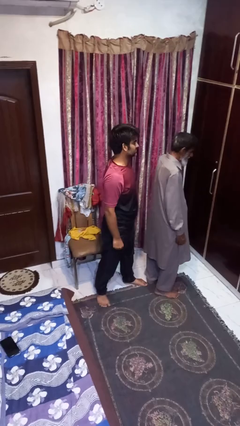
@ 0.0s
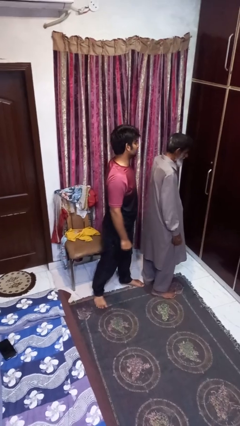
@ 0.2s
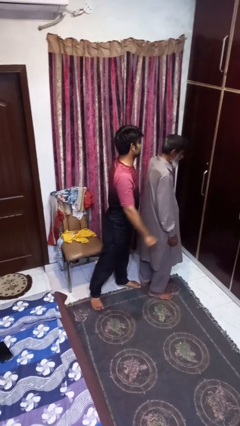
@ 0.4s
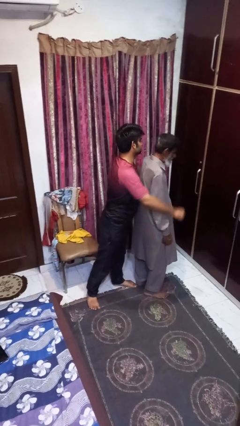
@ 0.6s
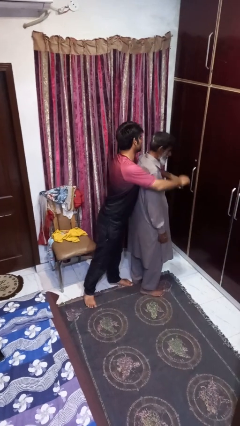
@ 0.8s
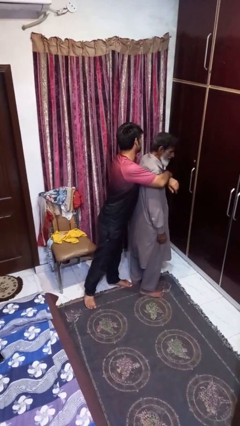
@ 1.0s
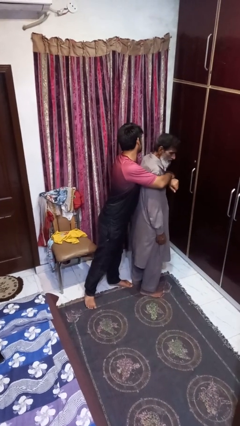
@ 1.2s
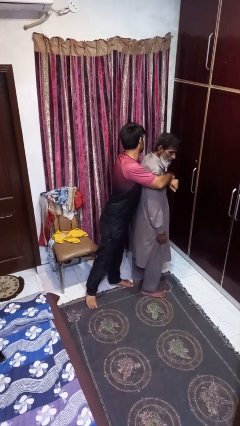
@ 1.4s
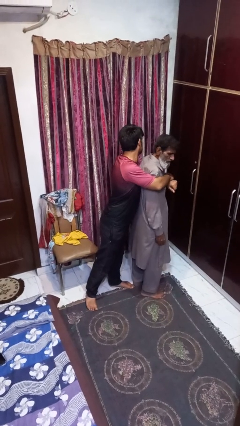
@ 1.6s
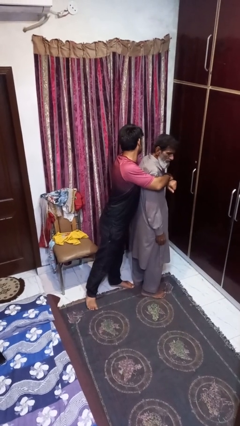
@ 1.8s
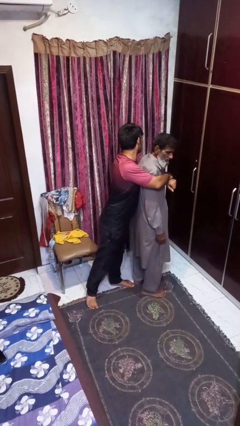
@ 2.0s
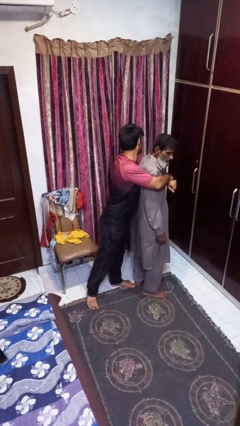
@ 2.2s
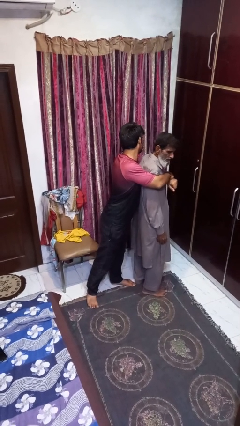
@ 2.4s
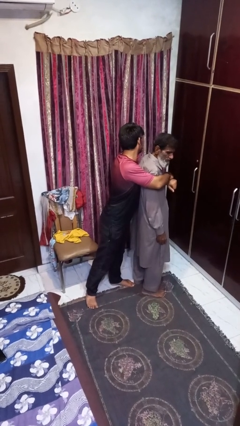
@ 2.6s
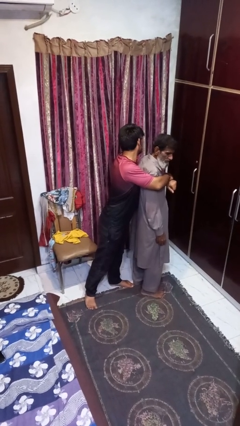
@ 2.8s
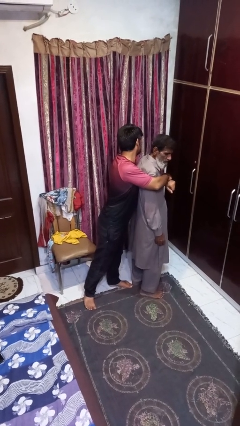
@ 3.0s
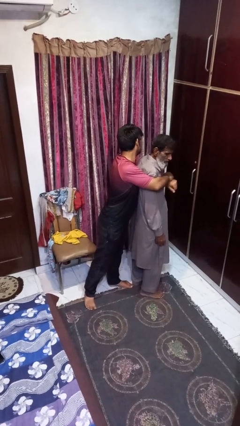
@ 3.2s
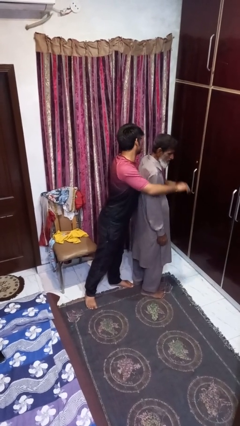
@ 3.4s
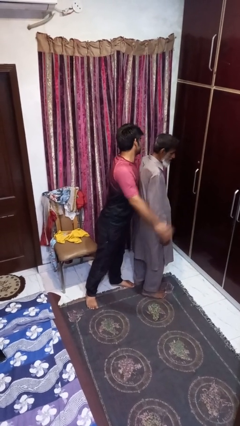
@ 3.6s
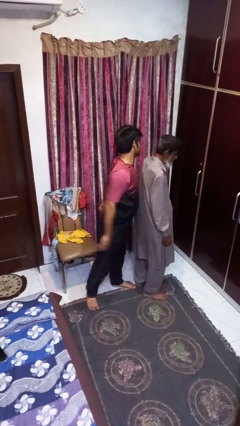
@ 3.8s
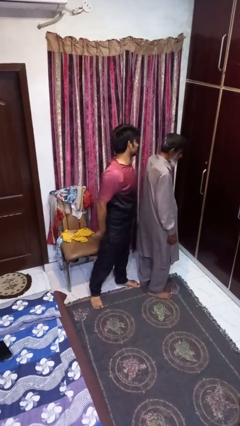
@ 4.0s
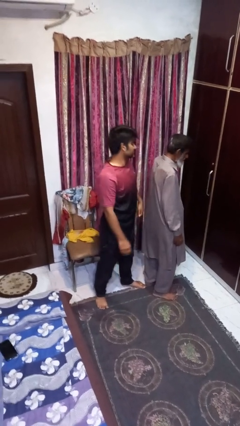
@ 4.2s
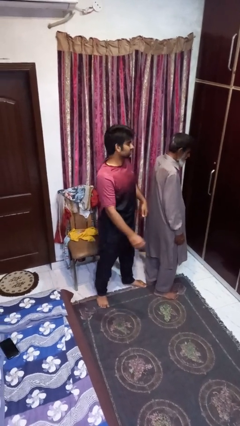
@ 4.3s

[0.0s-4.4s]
person hugs person from behind

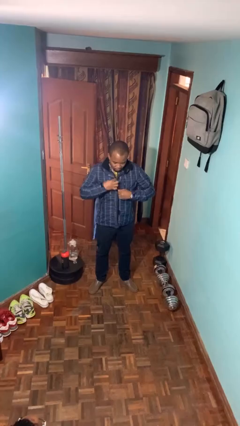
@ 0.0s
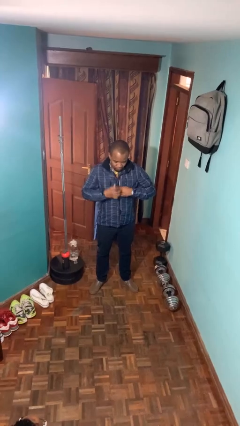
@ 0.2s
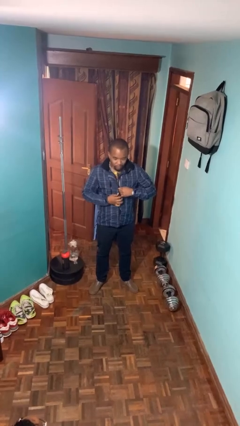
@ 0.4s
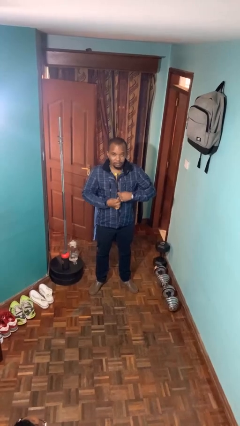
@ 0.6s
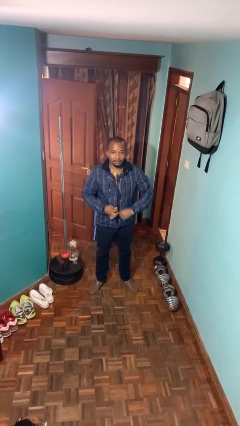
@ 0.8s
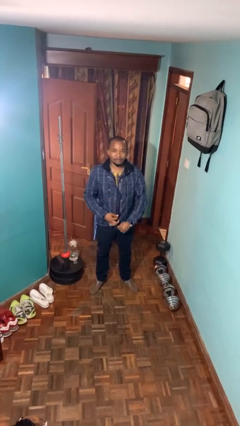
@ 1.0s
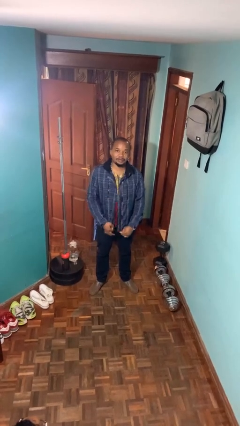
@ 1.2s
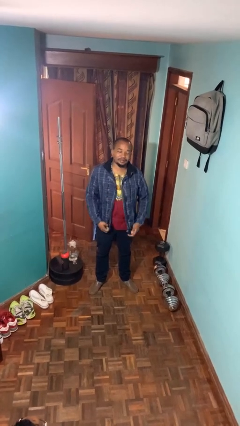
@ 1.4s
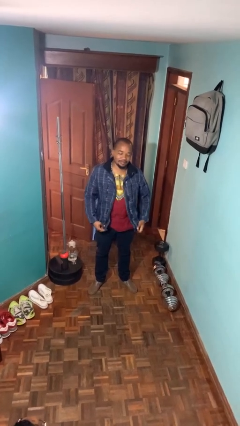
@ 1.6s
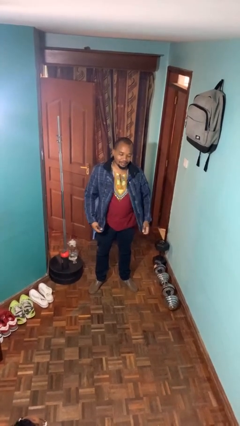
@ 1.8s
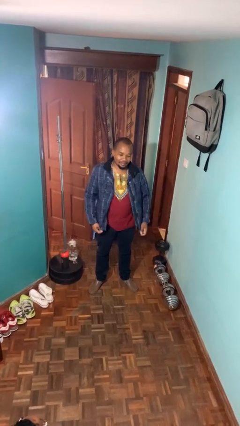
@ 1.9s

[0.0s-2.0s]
person unzips jacket

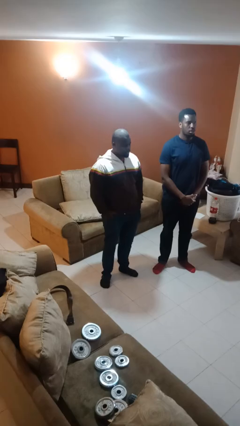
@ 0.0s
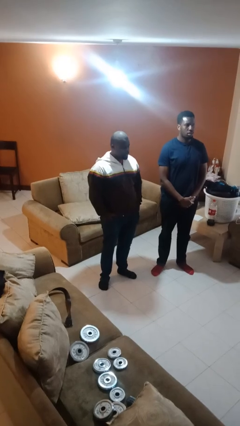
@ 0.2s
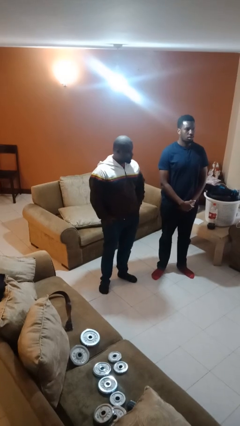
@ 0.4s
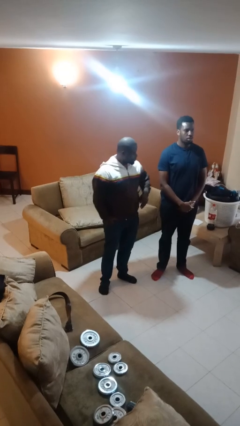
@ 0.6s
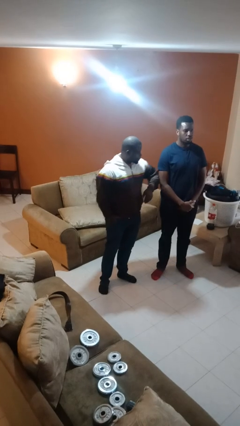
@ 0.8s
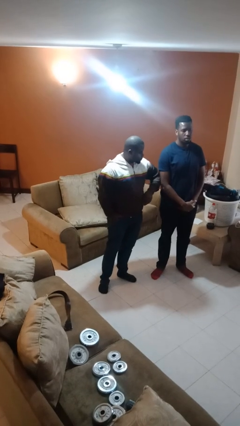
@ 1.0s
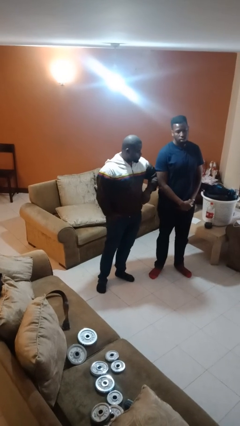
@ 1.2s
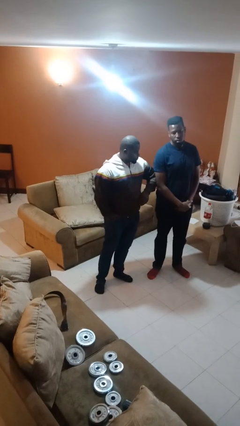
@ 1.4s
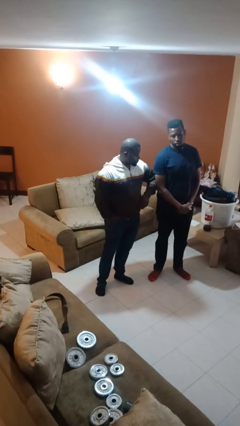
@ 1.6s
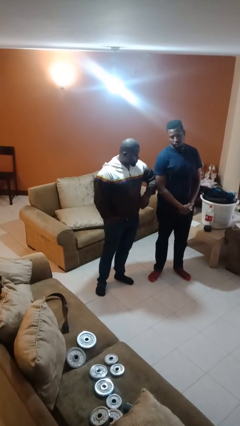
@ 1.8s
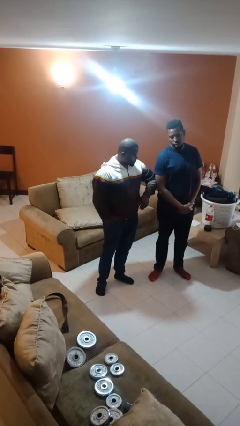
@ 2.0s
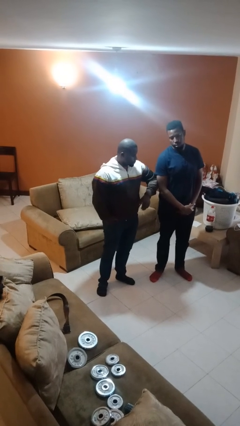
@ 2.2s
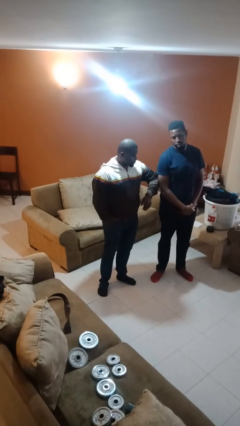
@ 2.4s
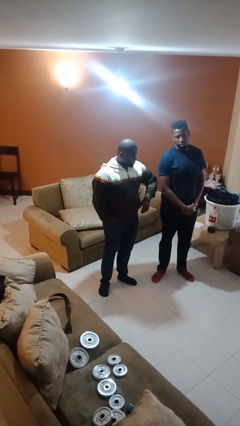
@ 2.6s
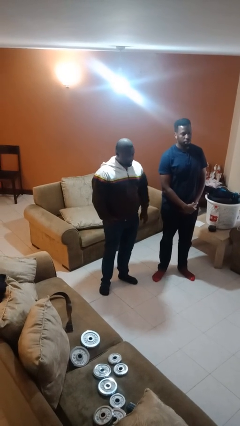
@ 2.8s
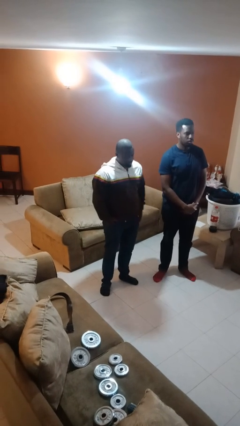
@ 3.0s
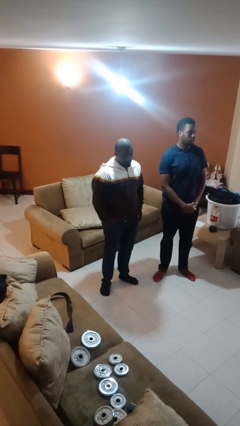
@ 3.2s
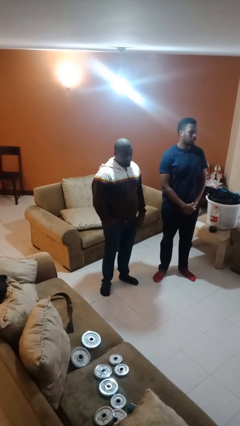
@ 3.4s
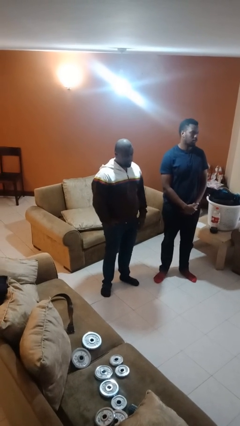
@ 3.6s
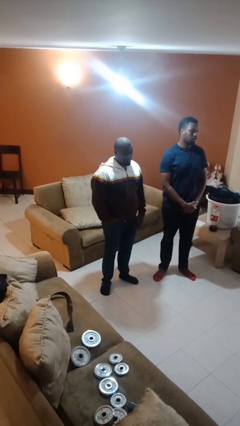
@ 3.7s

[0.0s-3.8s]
person nudges person with elbow

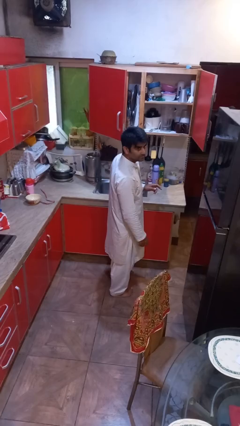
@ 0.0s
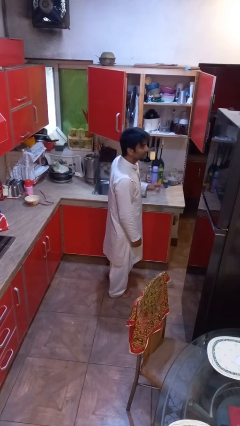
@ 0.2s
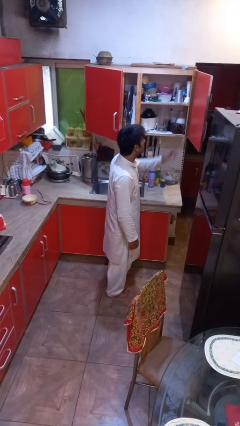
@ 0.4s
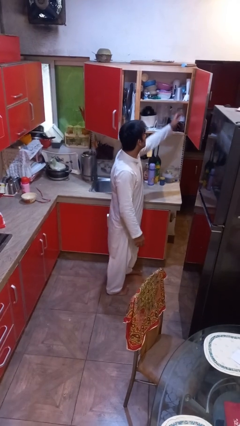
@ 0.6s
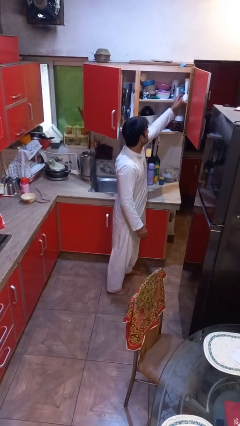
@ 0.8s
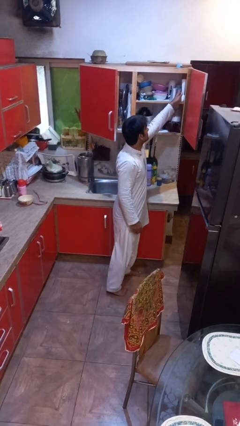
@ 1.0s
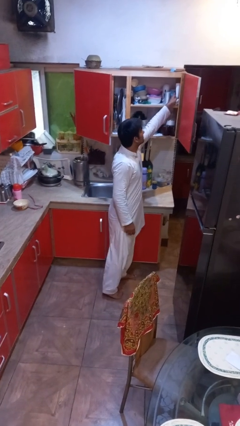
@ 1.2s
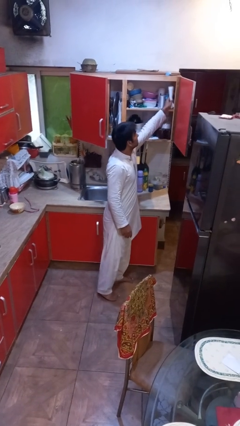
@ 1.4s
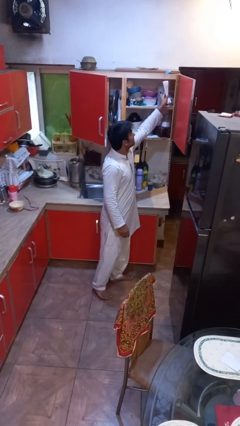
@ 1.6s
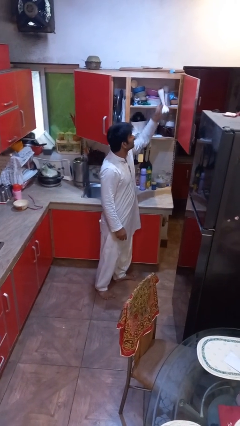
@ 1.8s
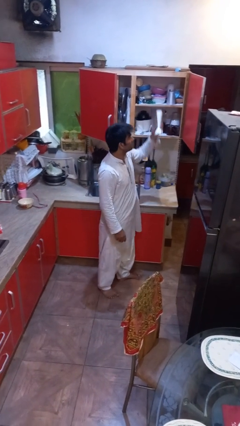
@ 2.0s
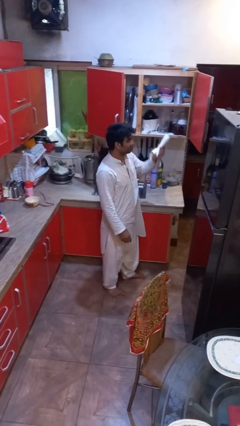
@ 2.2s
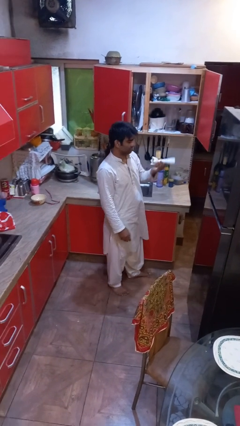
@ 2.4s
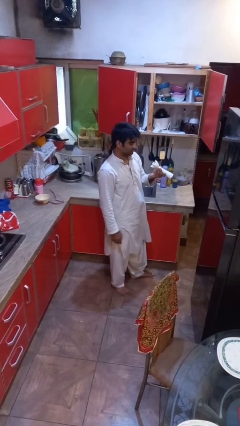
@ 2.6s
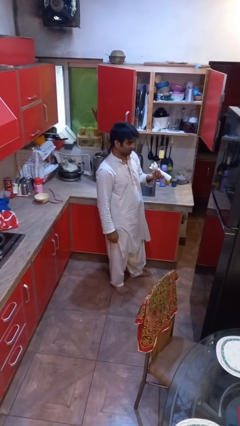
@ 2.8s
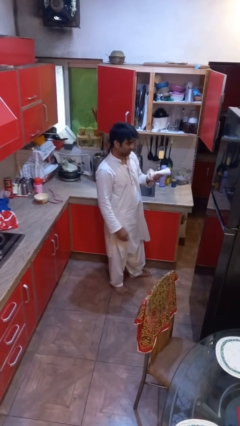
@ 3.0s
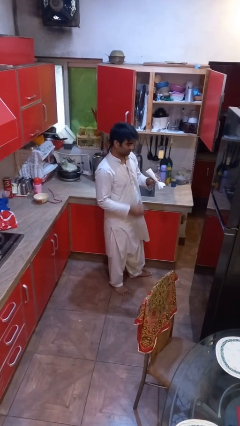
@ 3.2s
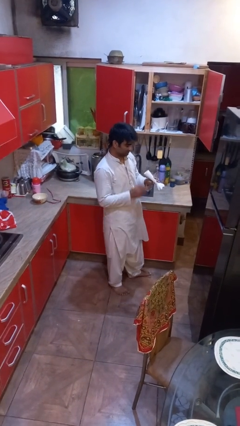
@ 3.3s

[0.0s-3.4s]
person picks up object from cabinet

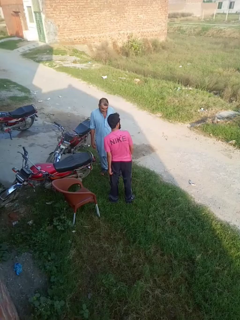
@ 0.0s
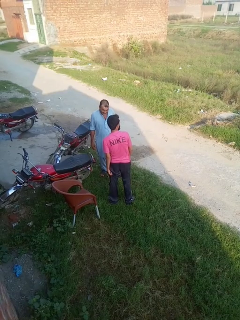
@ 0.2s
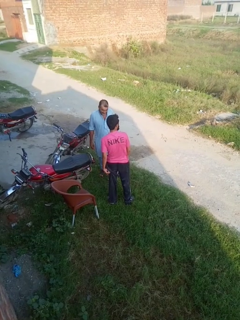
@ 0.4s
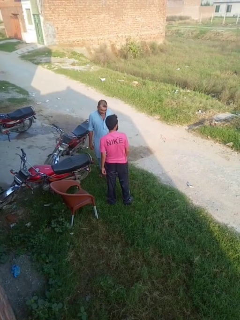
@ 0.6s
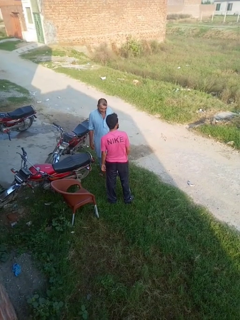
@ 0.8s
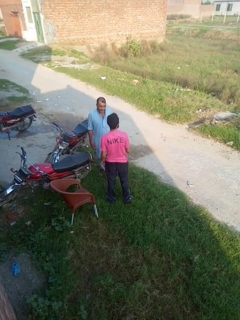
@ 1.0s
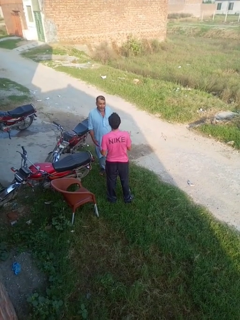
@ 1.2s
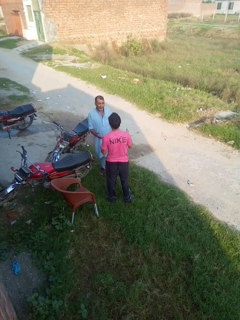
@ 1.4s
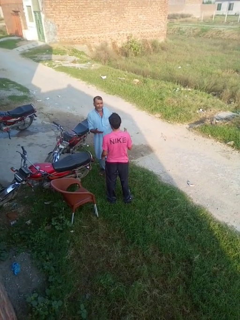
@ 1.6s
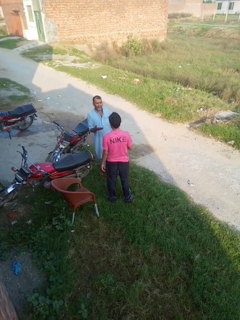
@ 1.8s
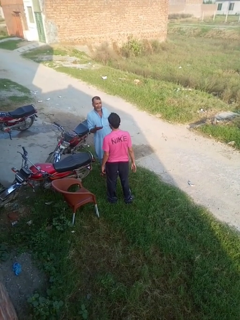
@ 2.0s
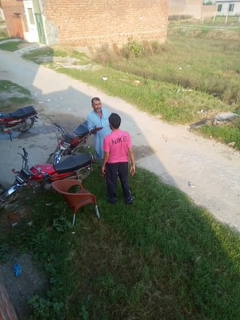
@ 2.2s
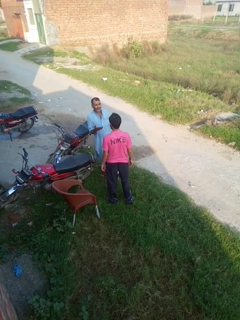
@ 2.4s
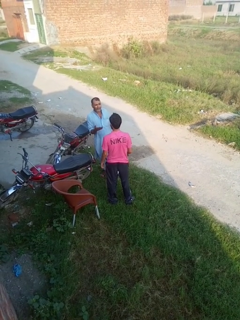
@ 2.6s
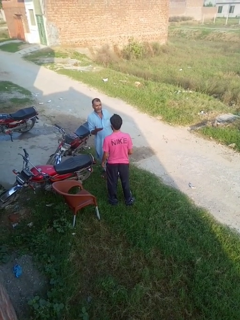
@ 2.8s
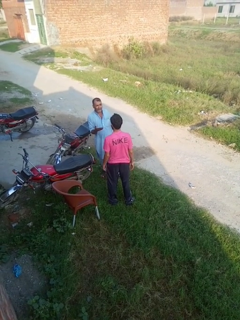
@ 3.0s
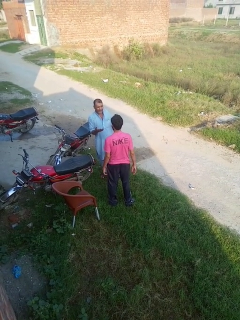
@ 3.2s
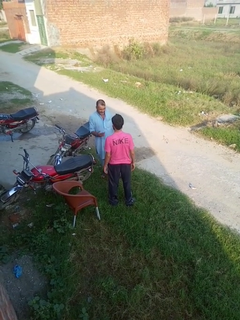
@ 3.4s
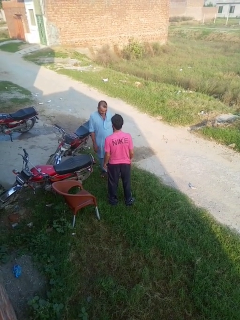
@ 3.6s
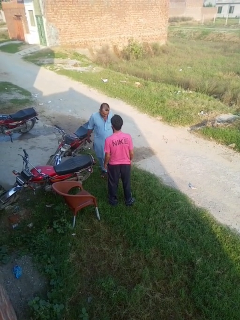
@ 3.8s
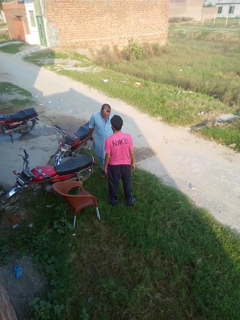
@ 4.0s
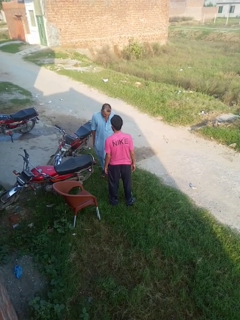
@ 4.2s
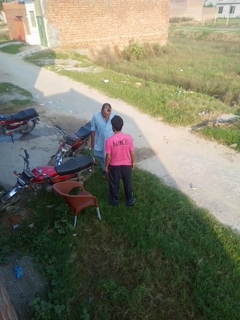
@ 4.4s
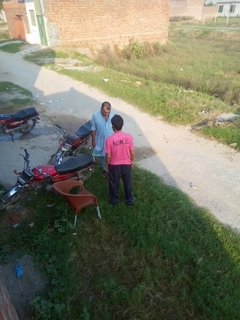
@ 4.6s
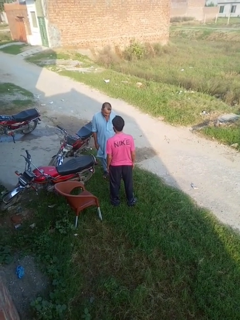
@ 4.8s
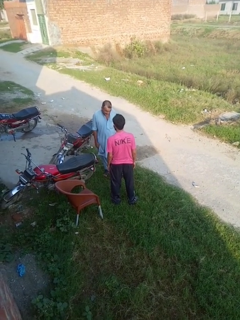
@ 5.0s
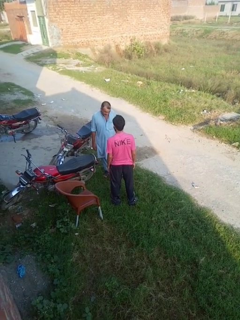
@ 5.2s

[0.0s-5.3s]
person laughs with person

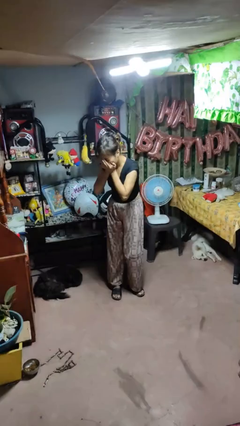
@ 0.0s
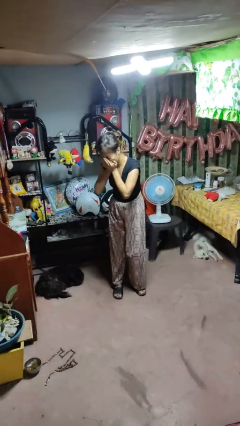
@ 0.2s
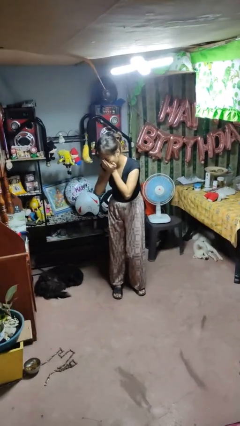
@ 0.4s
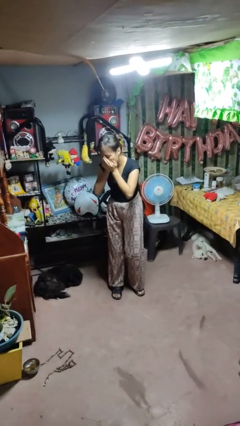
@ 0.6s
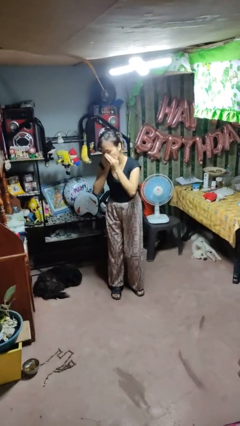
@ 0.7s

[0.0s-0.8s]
person sneezes into hand
